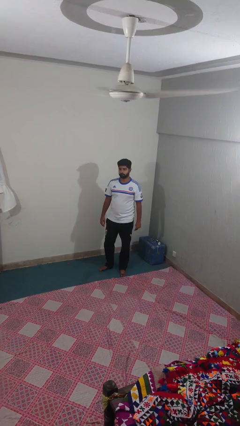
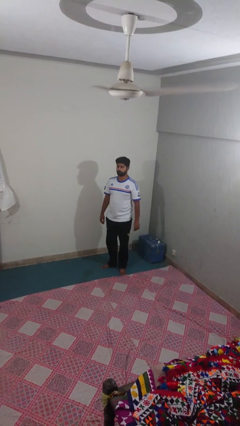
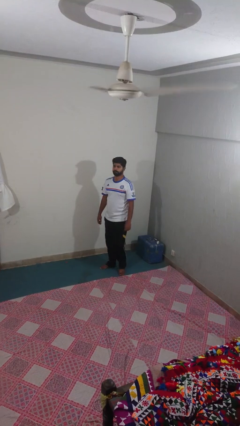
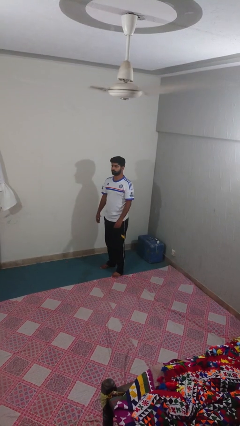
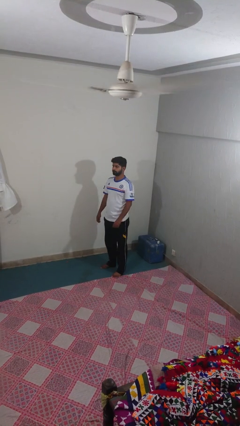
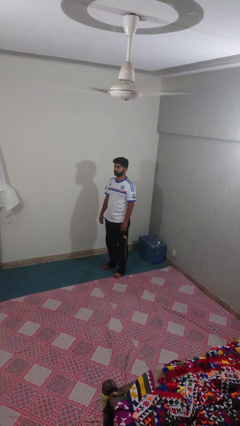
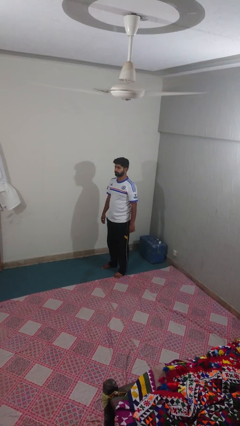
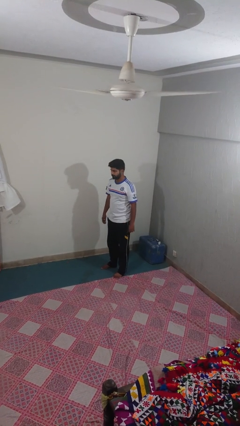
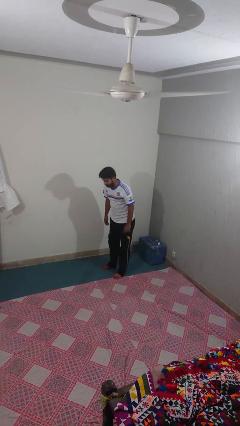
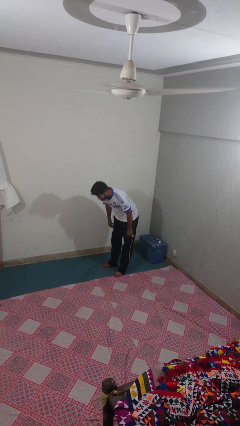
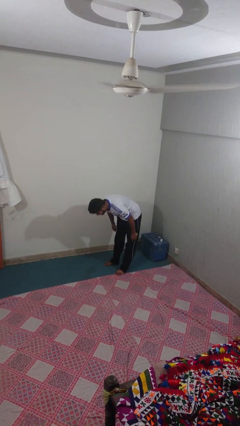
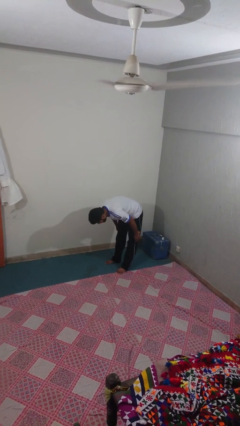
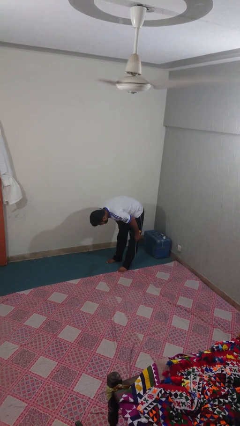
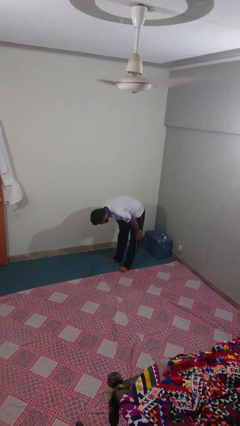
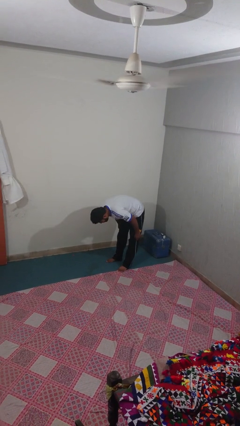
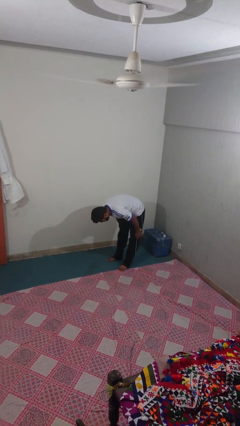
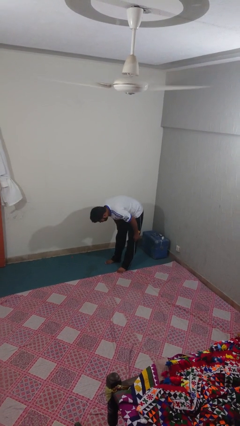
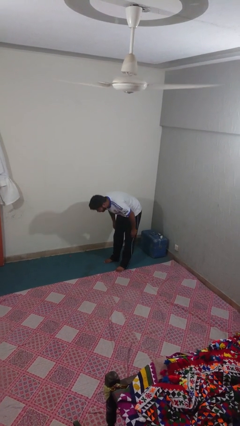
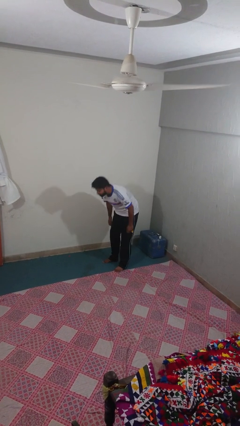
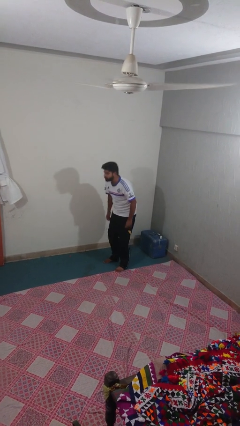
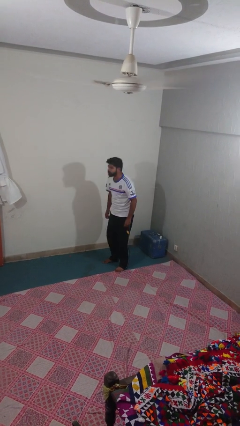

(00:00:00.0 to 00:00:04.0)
person bows

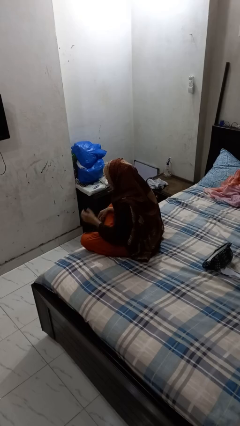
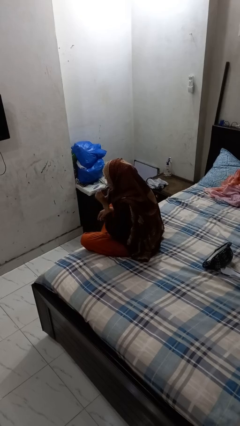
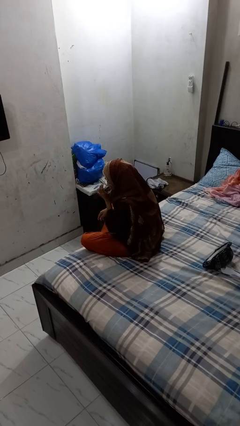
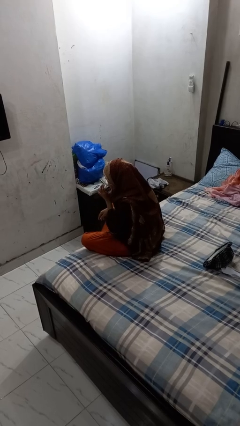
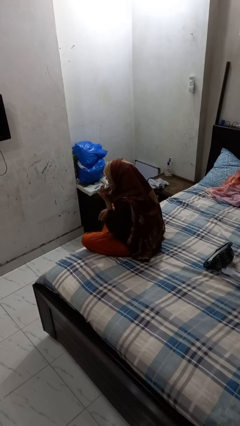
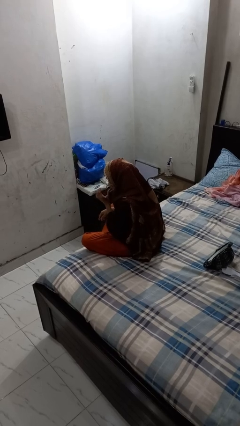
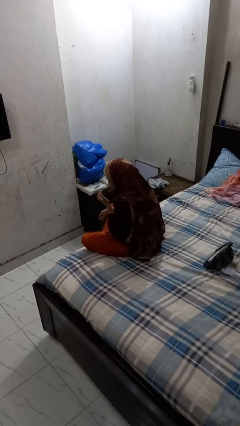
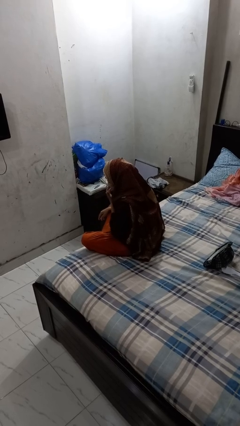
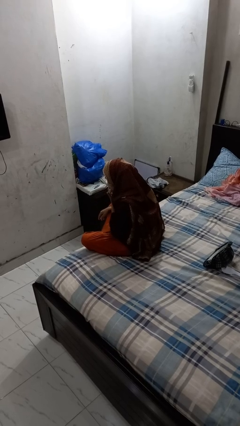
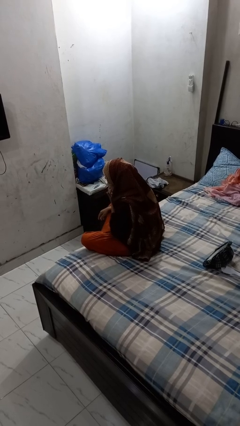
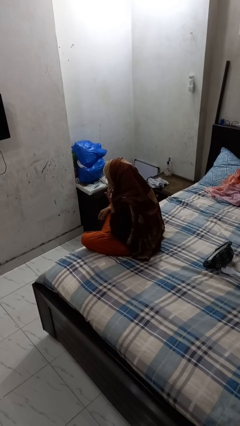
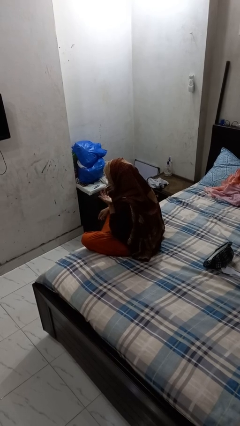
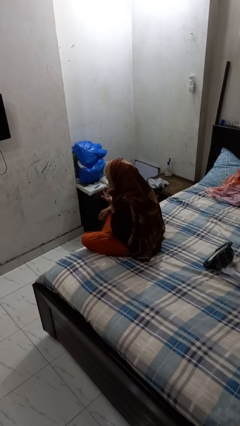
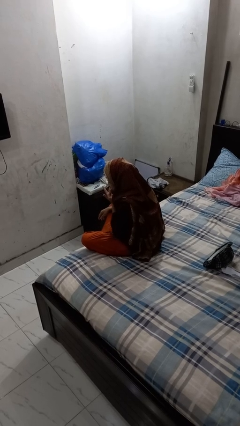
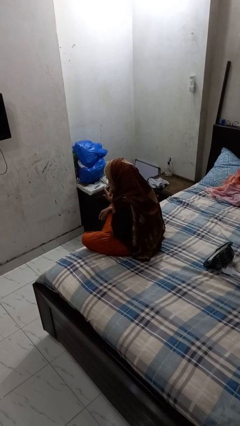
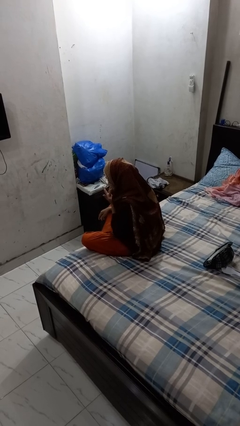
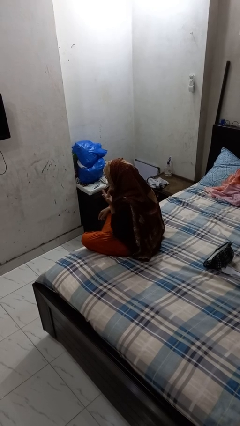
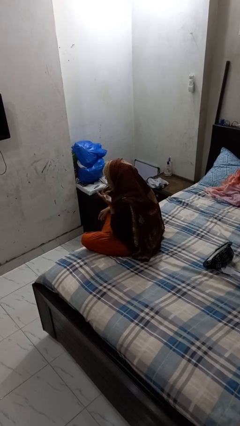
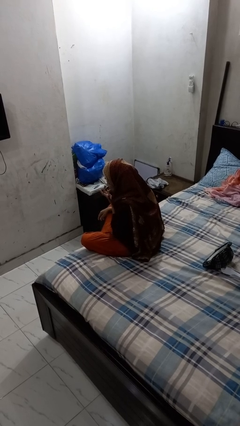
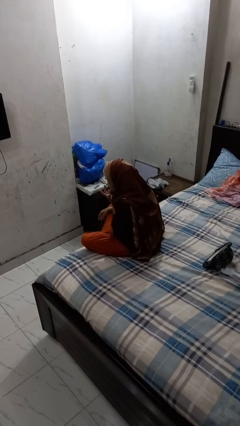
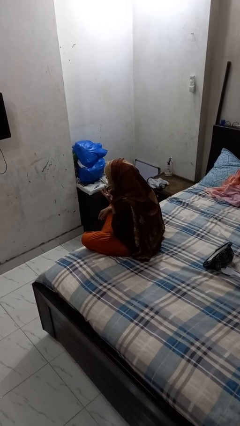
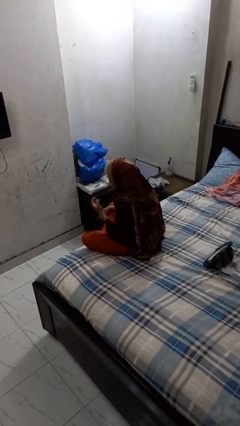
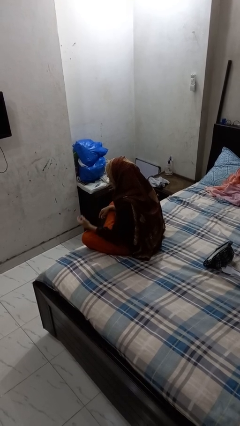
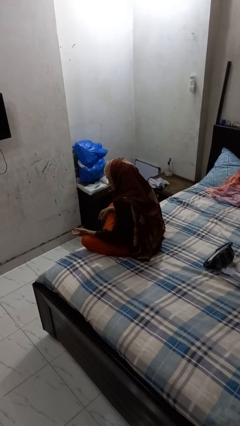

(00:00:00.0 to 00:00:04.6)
person licks fingers

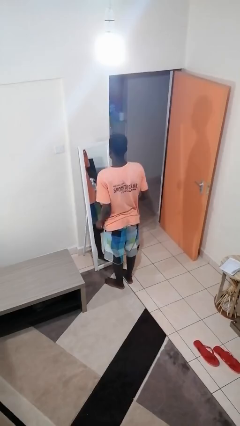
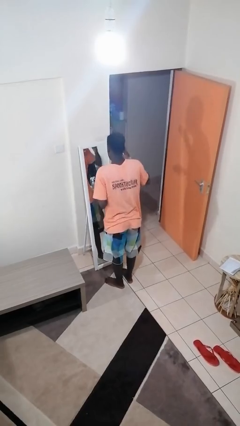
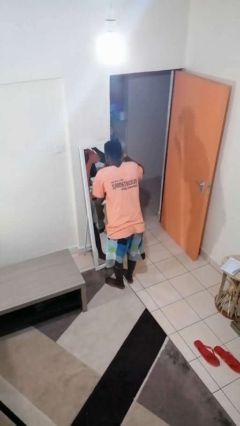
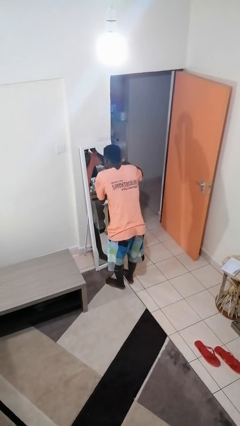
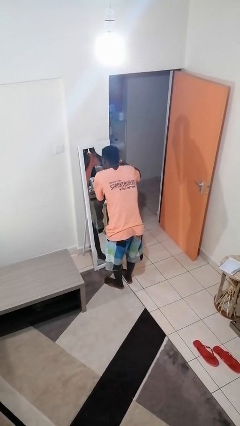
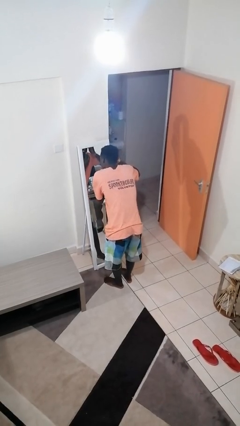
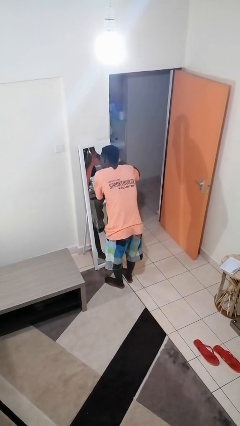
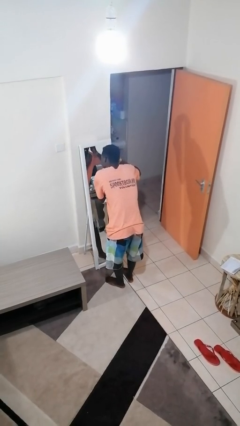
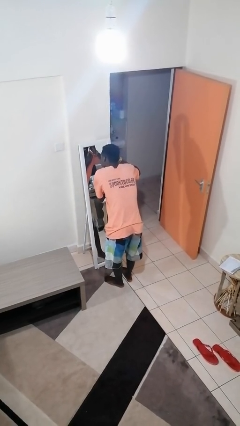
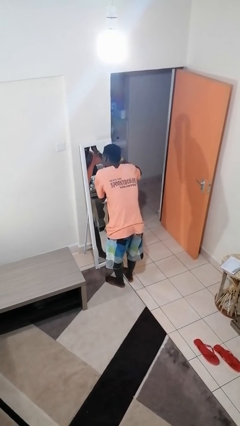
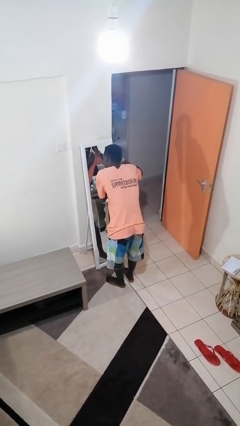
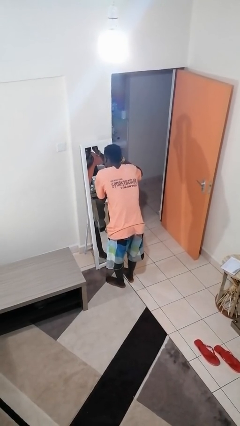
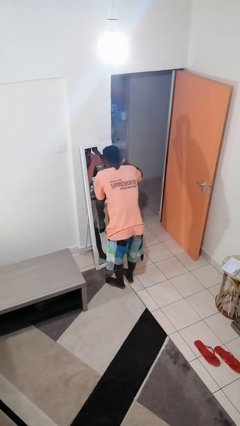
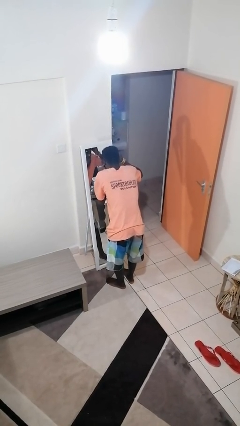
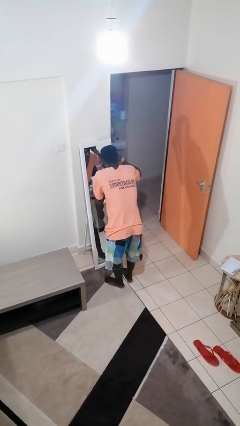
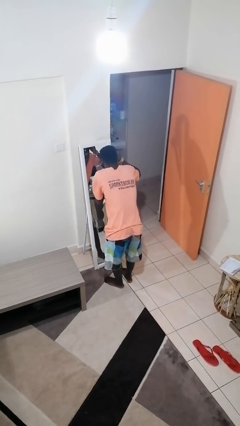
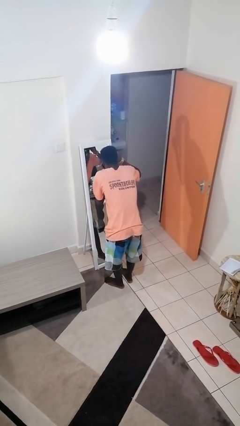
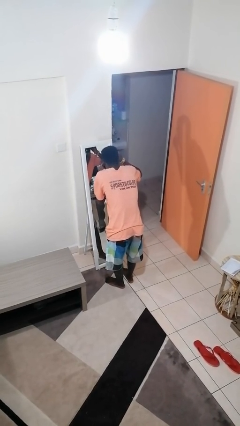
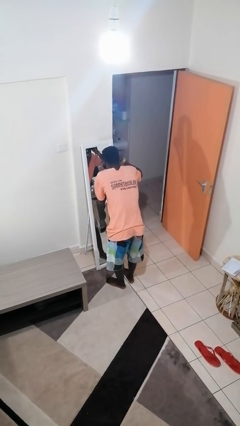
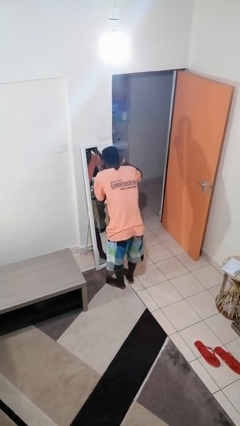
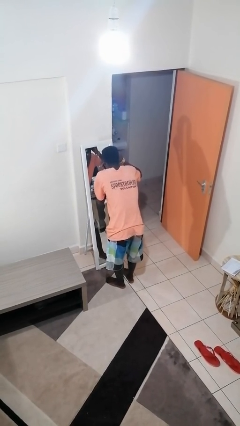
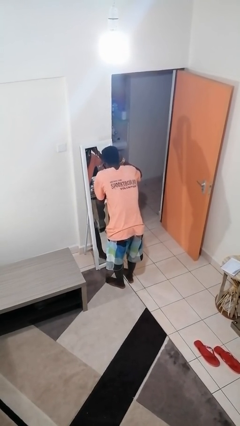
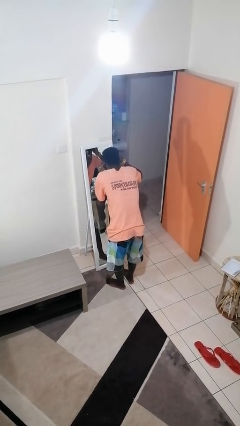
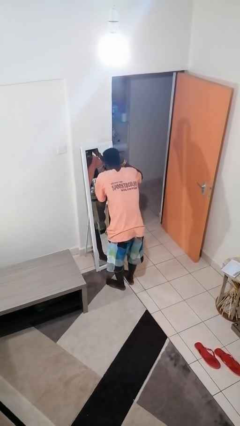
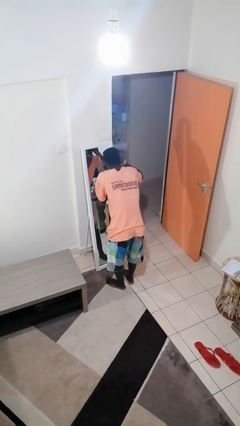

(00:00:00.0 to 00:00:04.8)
person applies eye makeup

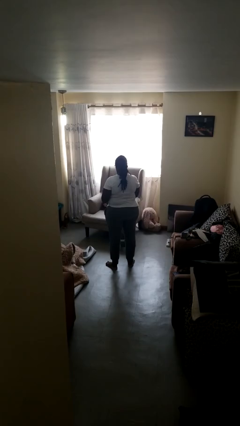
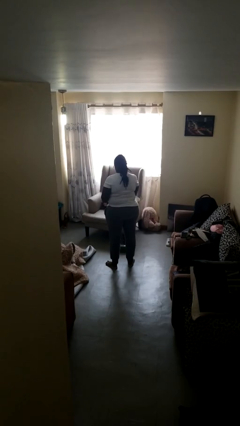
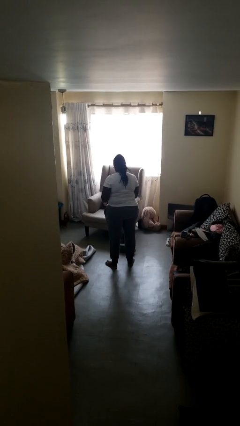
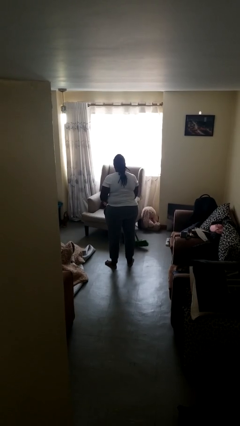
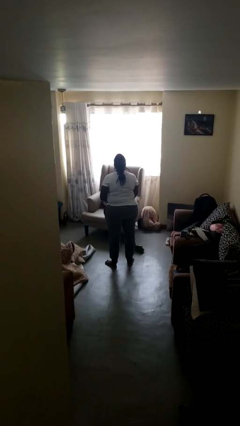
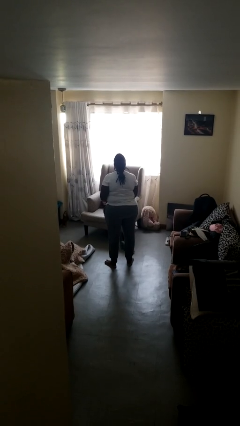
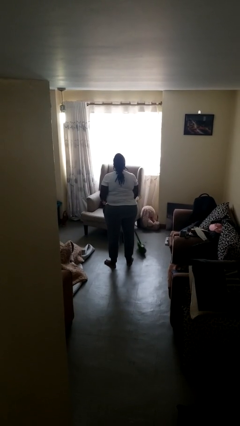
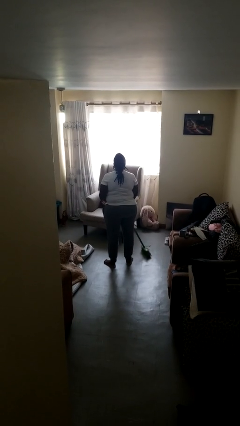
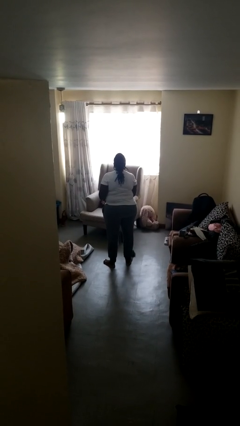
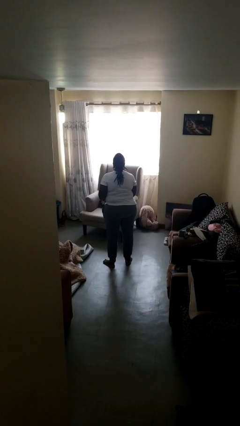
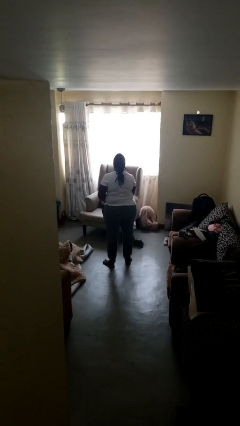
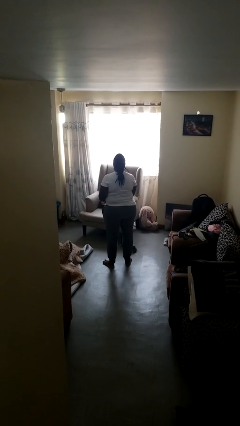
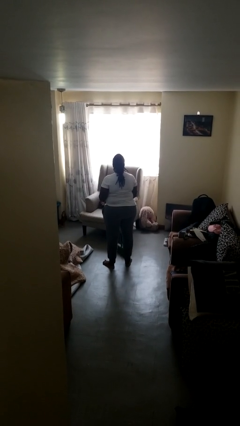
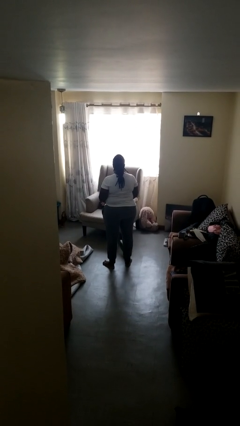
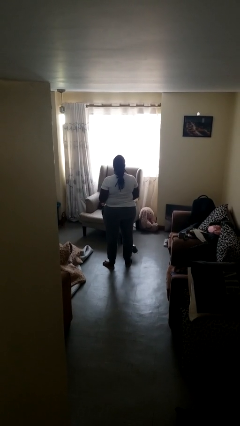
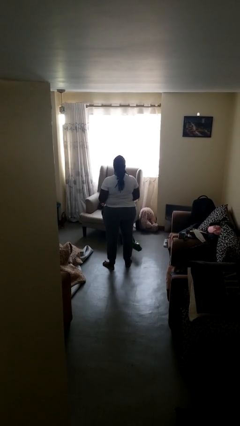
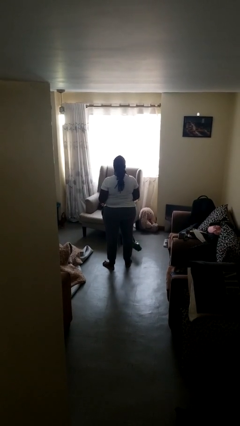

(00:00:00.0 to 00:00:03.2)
person sweeps floor

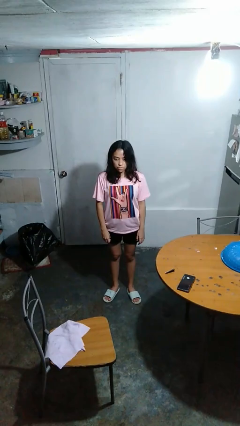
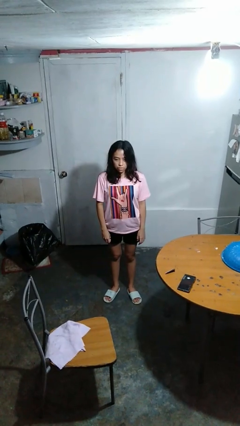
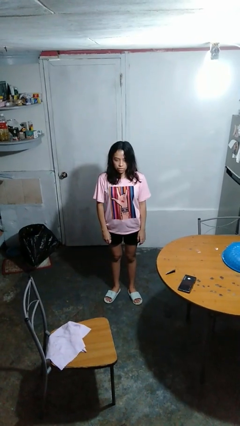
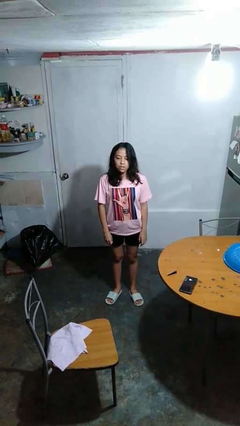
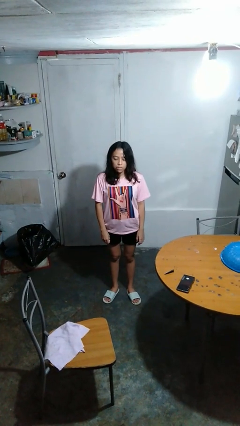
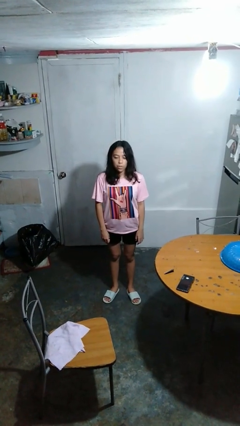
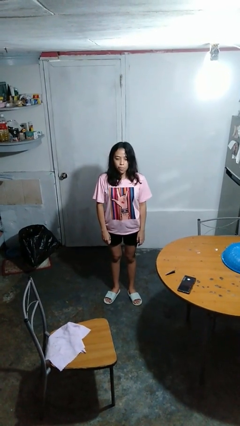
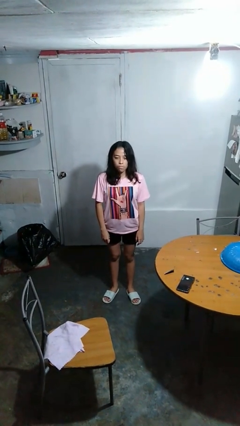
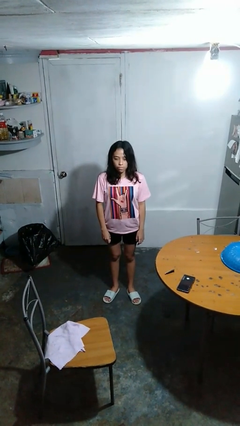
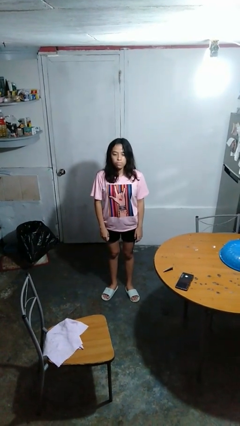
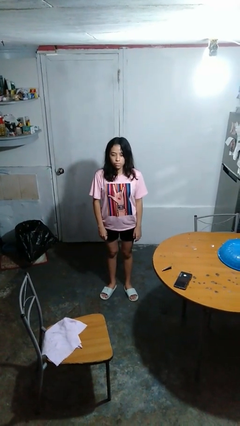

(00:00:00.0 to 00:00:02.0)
person nods head
